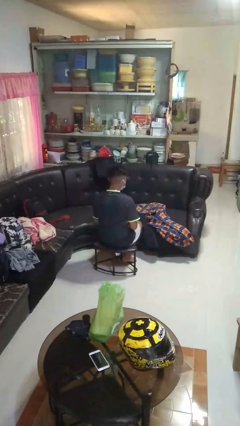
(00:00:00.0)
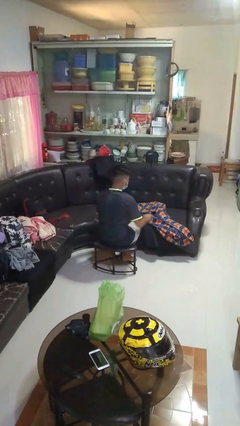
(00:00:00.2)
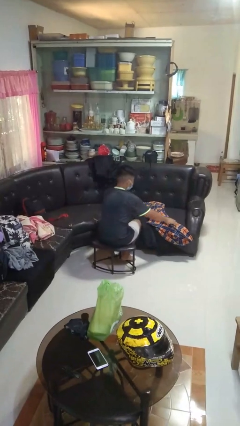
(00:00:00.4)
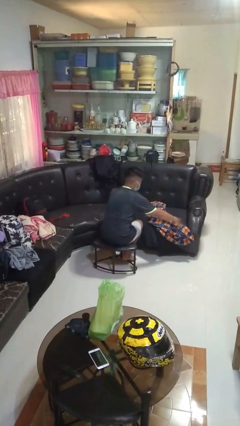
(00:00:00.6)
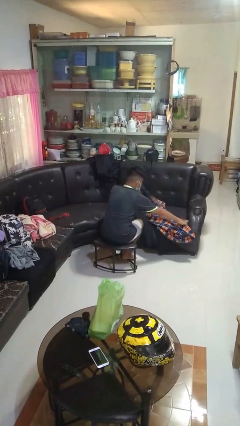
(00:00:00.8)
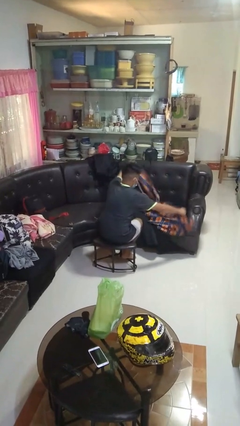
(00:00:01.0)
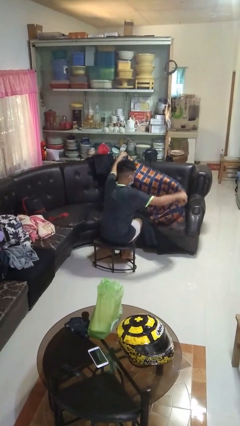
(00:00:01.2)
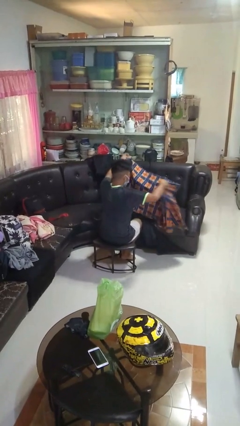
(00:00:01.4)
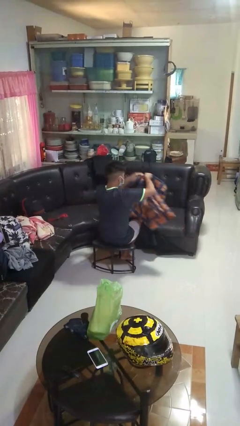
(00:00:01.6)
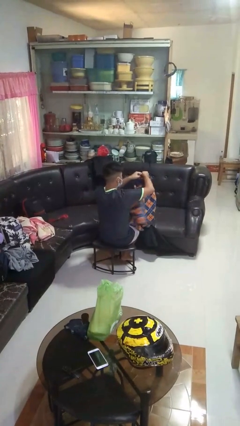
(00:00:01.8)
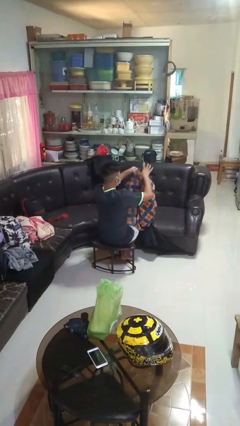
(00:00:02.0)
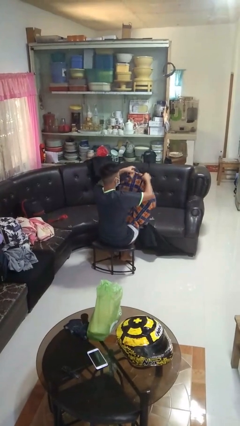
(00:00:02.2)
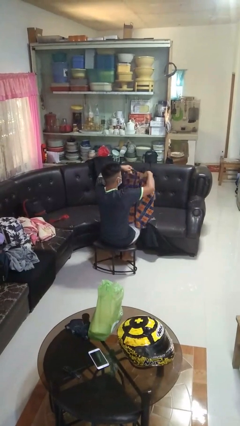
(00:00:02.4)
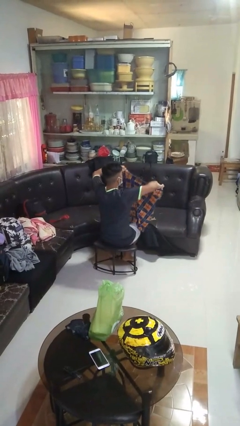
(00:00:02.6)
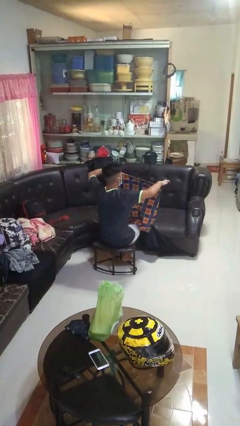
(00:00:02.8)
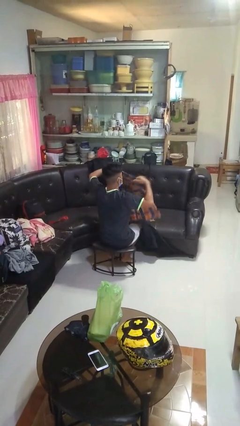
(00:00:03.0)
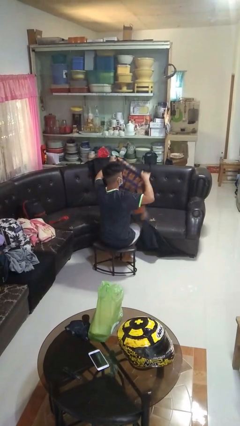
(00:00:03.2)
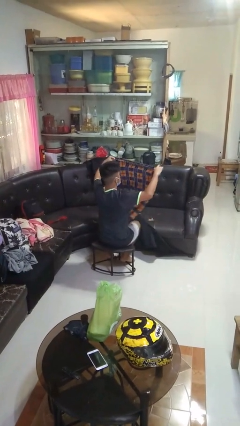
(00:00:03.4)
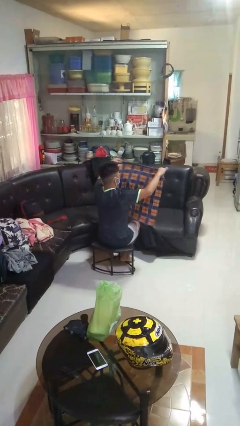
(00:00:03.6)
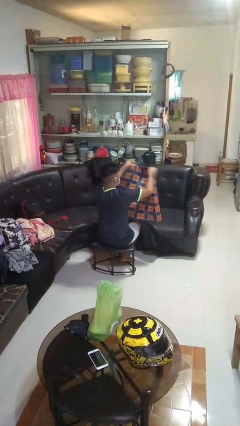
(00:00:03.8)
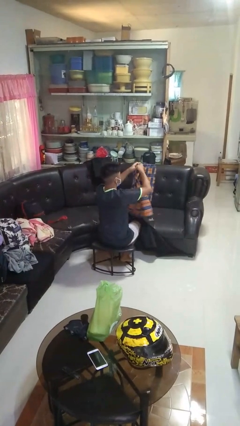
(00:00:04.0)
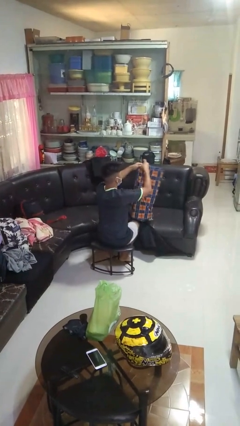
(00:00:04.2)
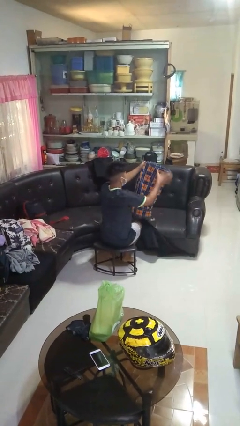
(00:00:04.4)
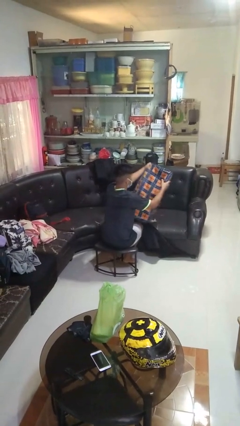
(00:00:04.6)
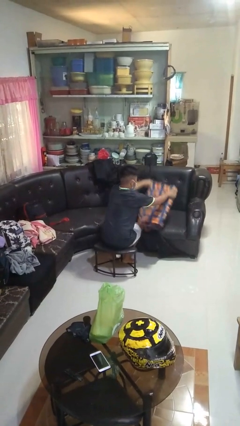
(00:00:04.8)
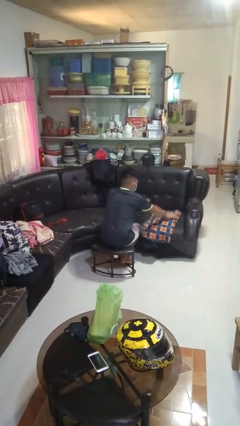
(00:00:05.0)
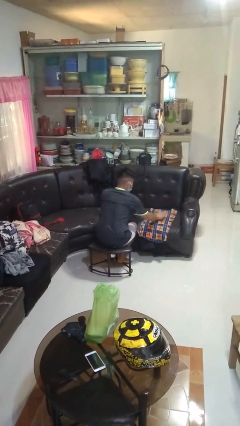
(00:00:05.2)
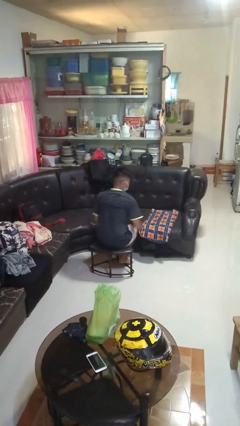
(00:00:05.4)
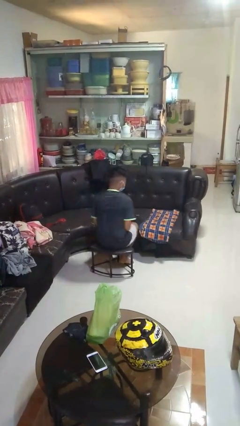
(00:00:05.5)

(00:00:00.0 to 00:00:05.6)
person folds blanket

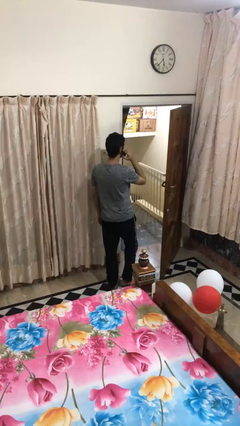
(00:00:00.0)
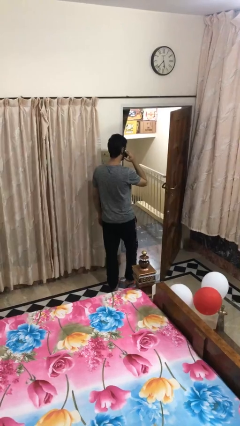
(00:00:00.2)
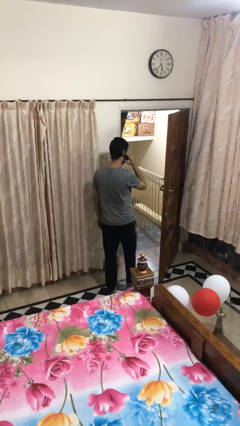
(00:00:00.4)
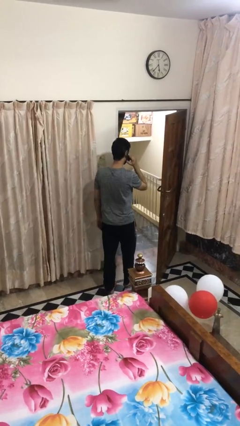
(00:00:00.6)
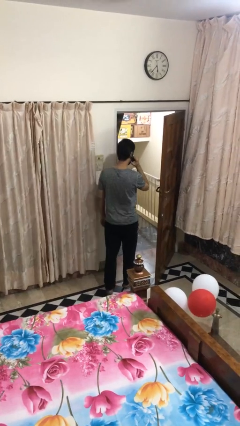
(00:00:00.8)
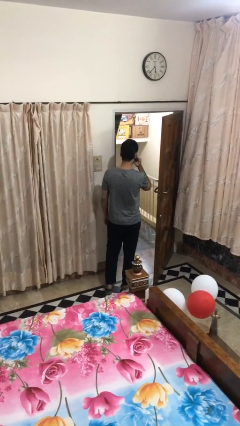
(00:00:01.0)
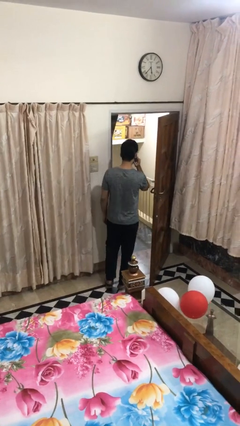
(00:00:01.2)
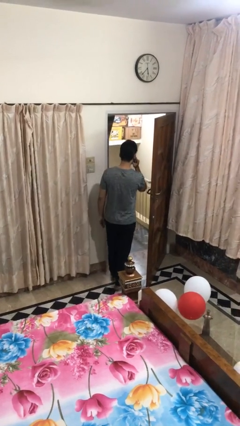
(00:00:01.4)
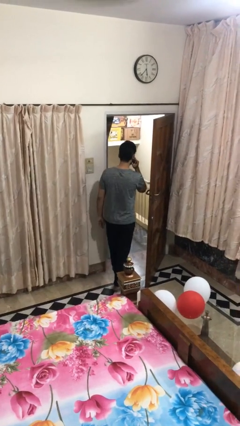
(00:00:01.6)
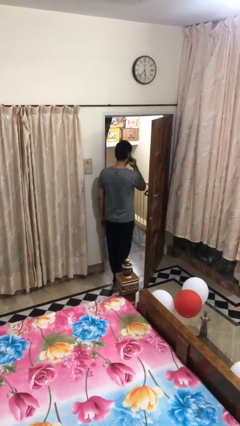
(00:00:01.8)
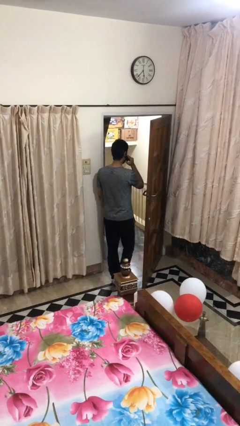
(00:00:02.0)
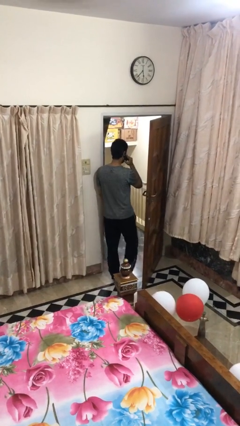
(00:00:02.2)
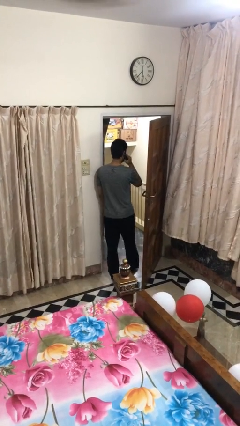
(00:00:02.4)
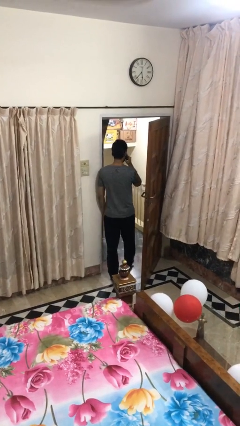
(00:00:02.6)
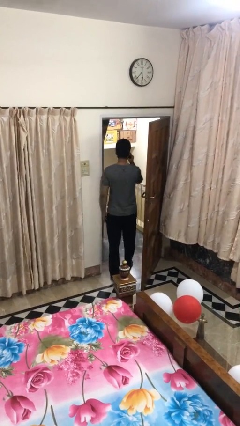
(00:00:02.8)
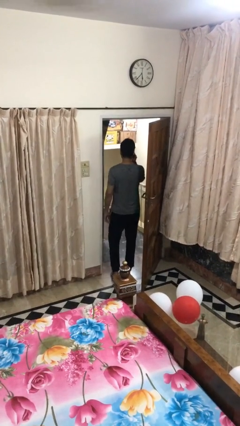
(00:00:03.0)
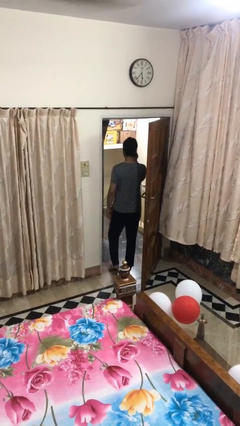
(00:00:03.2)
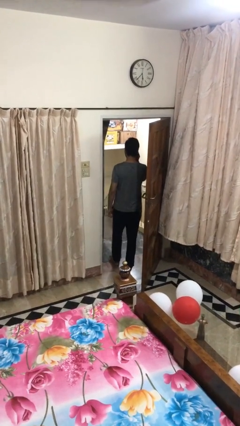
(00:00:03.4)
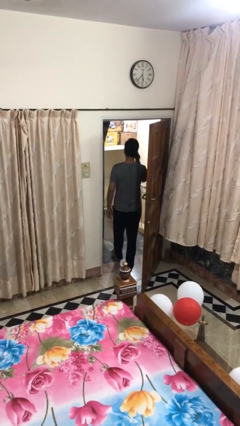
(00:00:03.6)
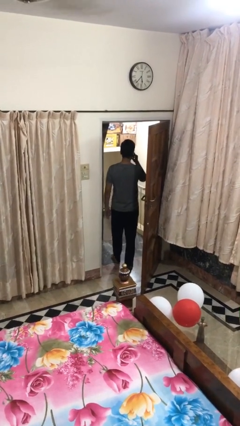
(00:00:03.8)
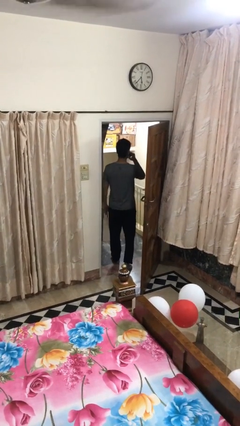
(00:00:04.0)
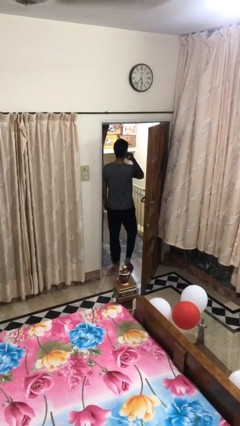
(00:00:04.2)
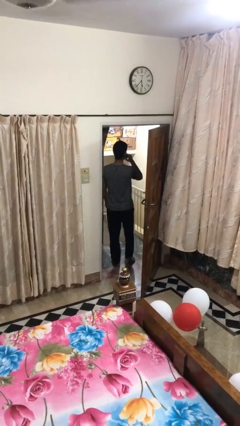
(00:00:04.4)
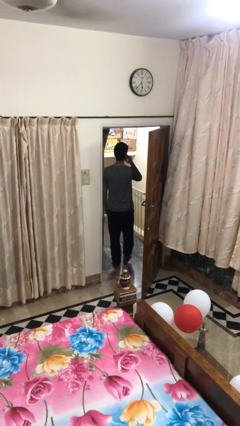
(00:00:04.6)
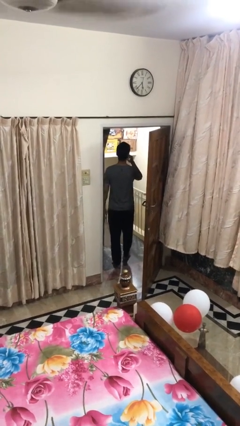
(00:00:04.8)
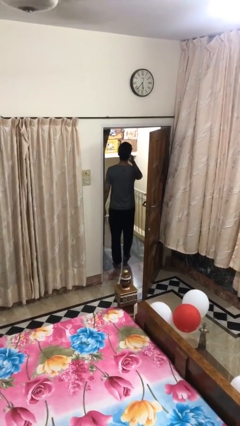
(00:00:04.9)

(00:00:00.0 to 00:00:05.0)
person exits scene through structure

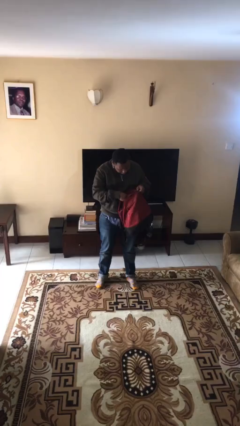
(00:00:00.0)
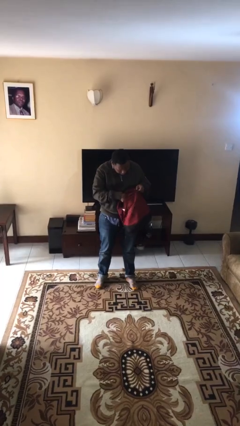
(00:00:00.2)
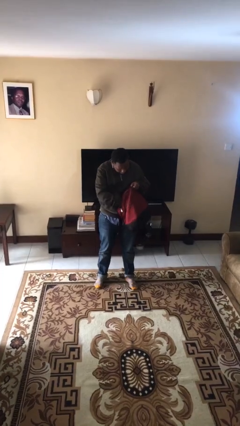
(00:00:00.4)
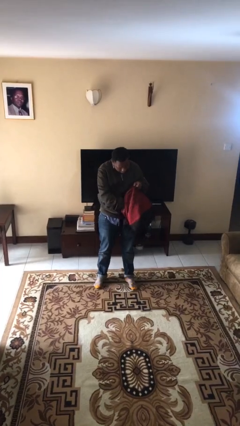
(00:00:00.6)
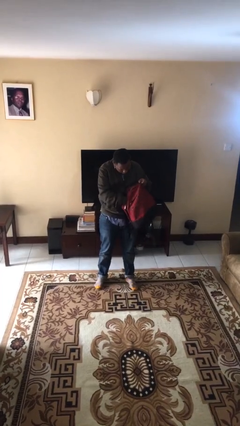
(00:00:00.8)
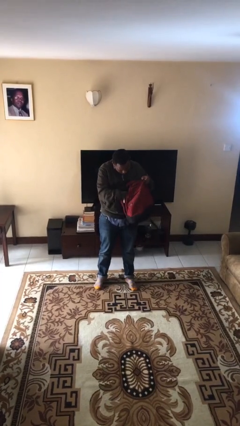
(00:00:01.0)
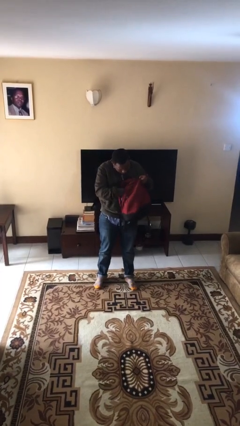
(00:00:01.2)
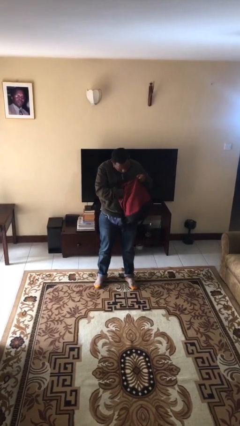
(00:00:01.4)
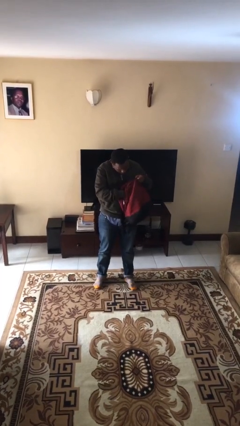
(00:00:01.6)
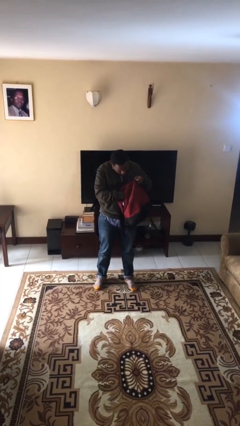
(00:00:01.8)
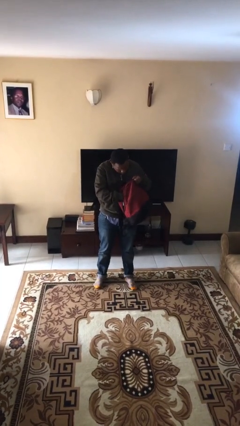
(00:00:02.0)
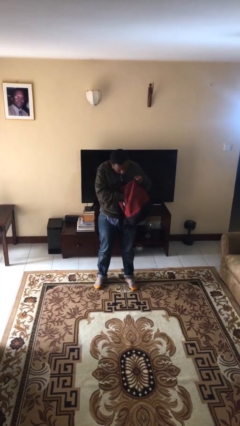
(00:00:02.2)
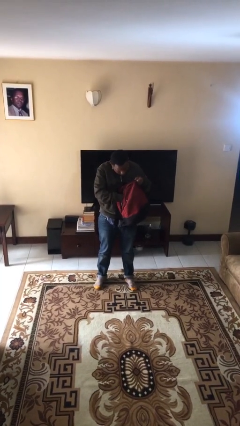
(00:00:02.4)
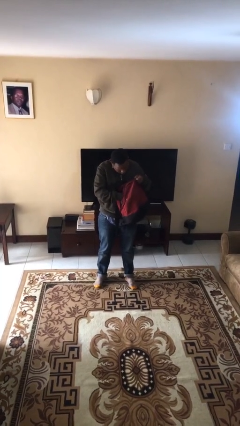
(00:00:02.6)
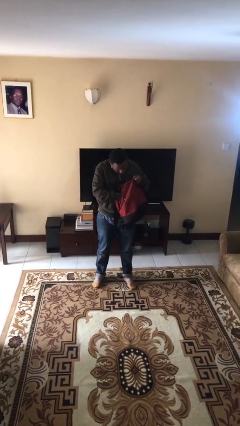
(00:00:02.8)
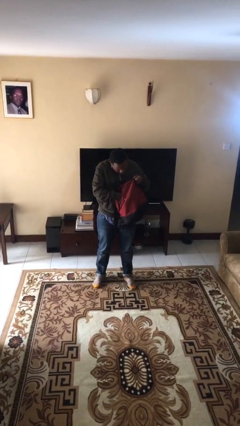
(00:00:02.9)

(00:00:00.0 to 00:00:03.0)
person searches in backpack

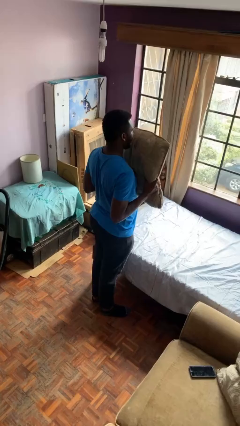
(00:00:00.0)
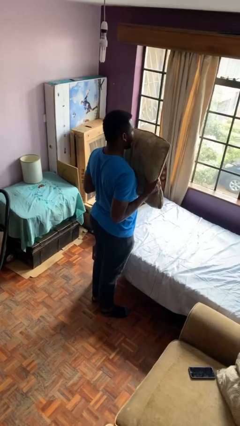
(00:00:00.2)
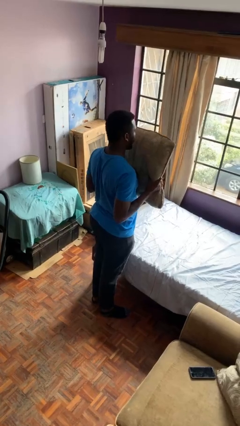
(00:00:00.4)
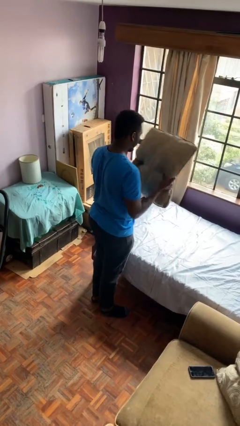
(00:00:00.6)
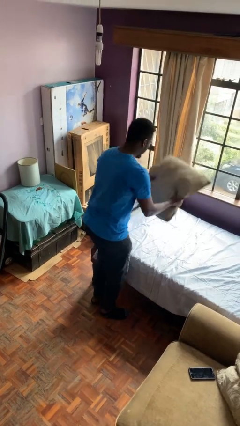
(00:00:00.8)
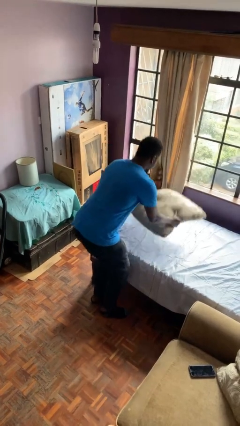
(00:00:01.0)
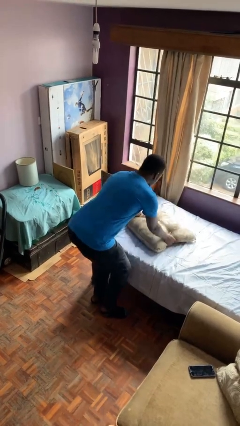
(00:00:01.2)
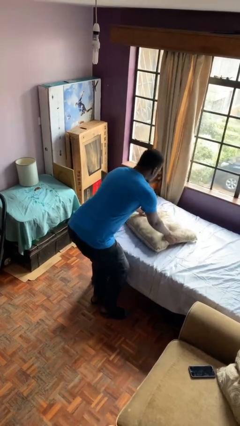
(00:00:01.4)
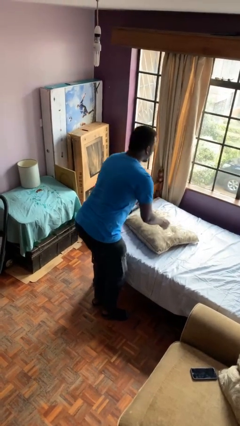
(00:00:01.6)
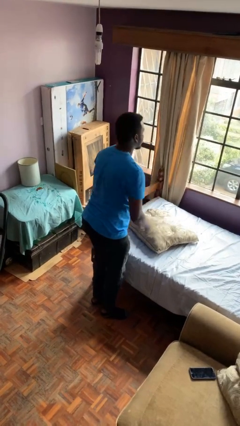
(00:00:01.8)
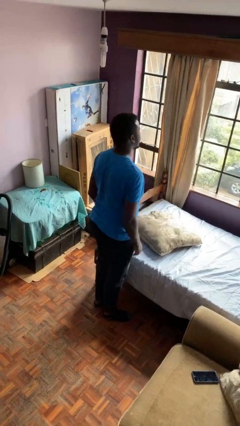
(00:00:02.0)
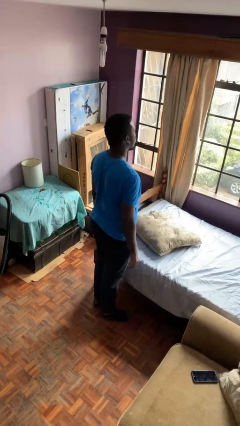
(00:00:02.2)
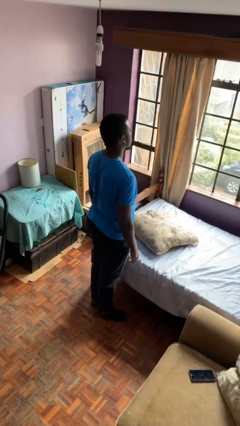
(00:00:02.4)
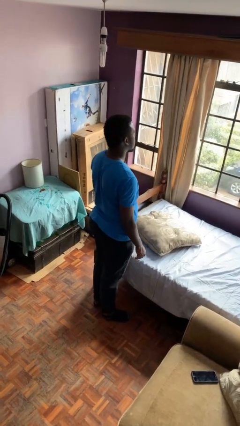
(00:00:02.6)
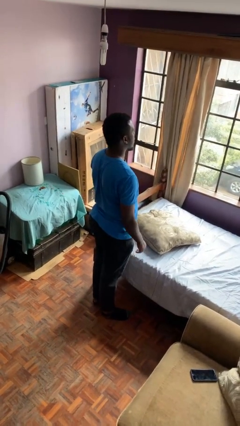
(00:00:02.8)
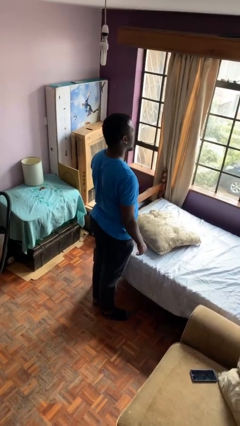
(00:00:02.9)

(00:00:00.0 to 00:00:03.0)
person puts down object on bed

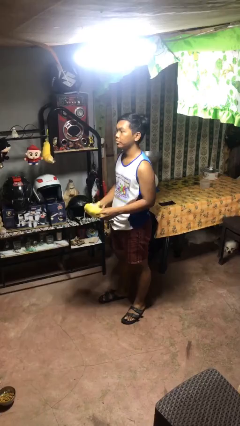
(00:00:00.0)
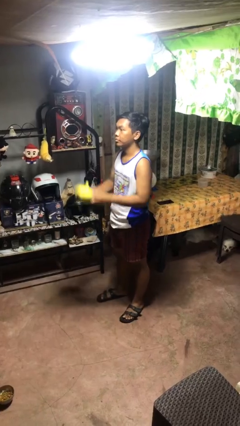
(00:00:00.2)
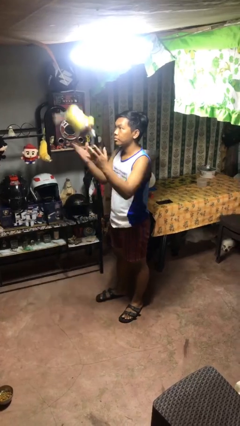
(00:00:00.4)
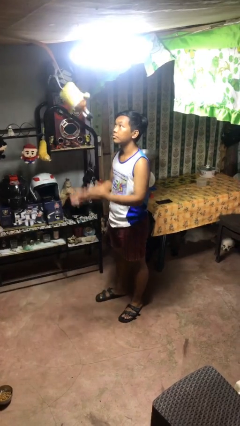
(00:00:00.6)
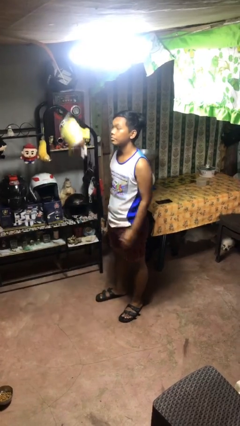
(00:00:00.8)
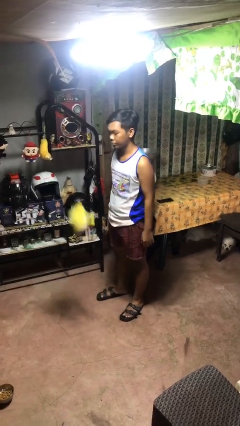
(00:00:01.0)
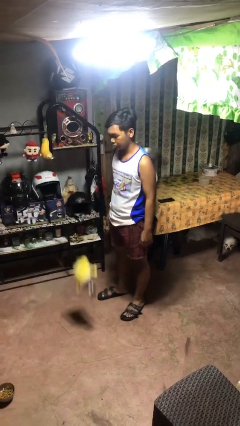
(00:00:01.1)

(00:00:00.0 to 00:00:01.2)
person throws object into air
